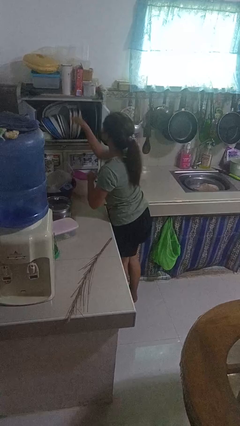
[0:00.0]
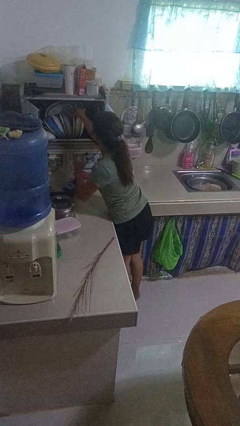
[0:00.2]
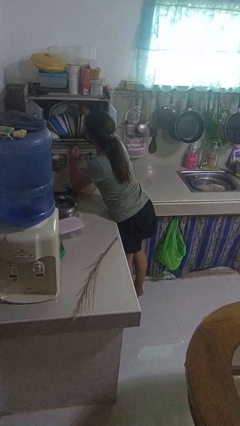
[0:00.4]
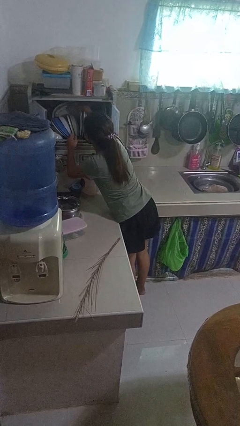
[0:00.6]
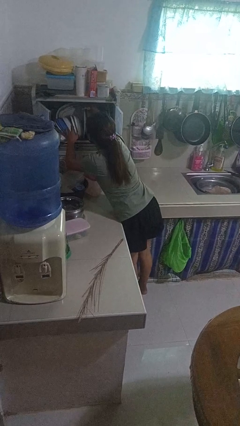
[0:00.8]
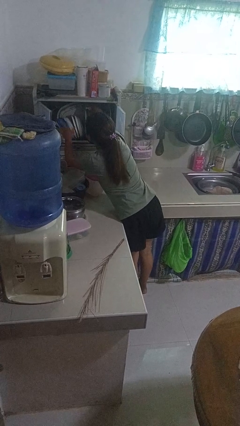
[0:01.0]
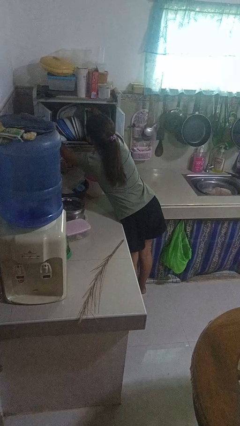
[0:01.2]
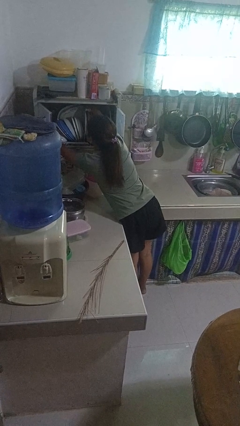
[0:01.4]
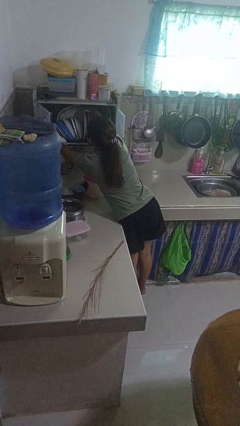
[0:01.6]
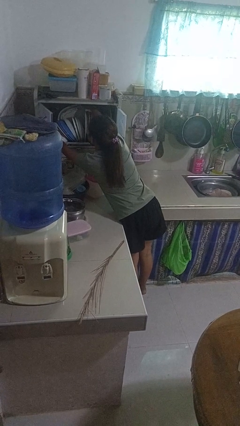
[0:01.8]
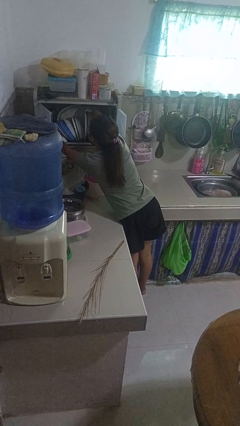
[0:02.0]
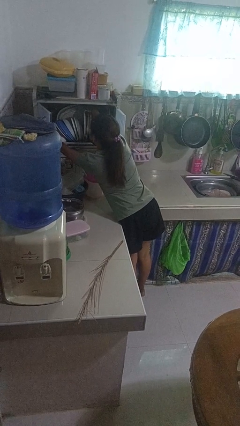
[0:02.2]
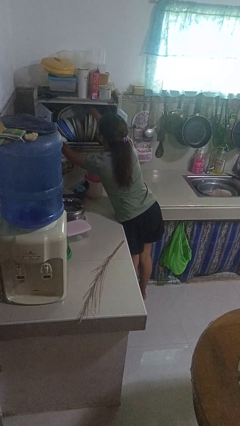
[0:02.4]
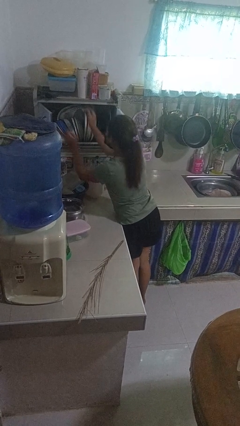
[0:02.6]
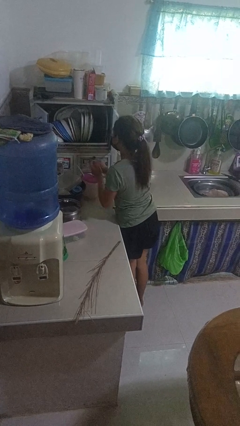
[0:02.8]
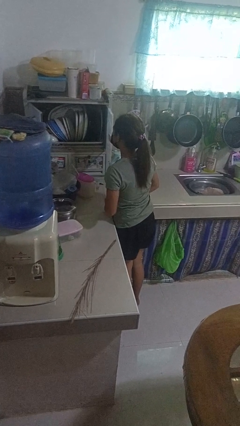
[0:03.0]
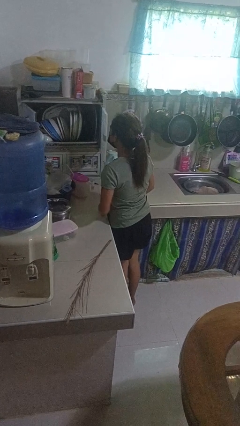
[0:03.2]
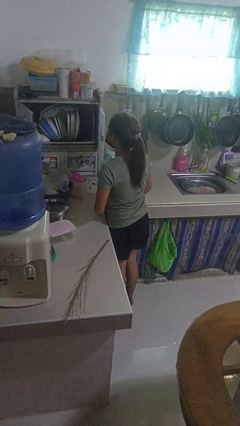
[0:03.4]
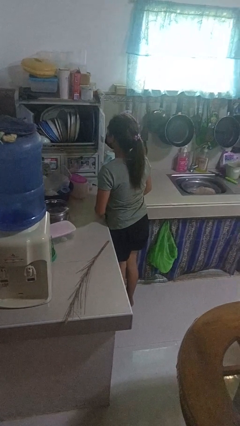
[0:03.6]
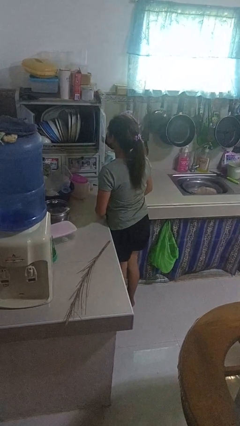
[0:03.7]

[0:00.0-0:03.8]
person searches in kitchen drawer

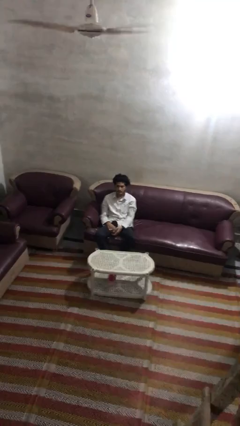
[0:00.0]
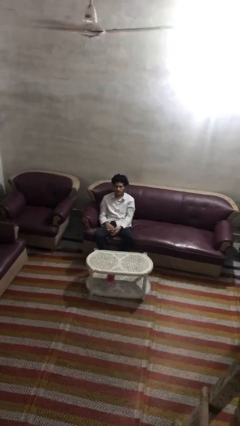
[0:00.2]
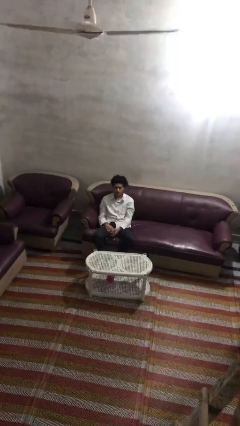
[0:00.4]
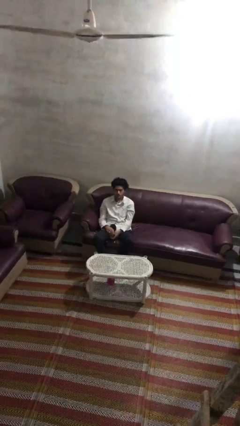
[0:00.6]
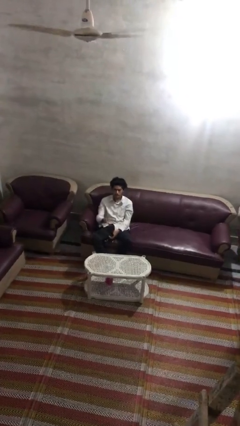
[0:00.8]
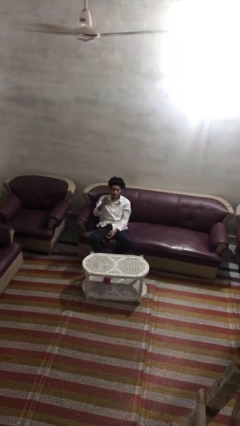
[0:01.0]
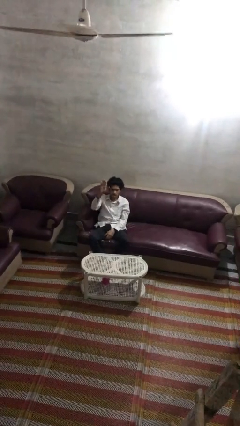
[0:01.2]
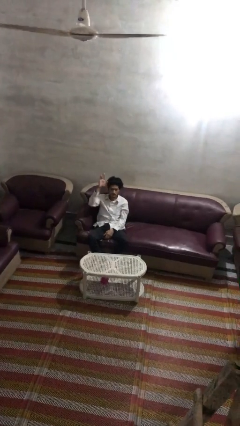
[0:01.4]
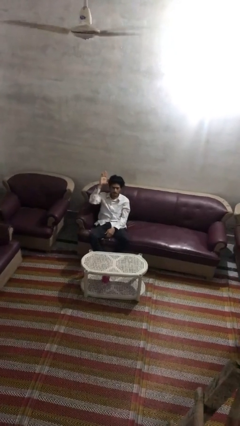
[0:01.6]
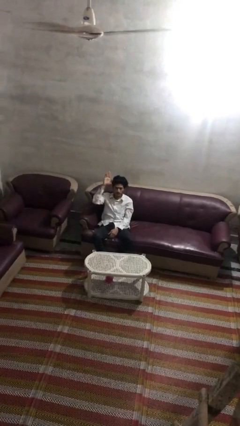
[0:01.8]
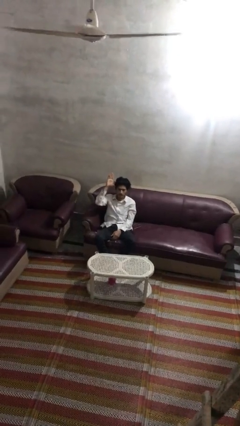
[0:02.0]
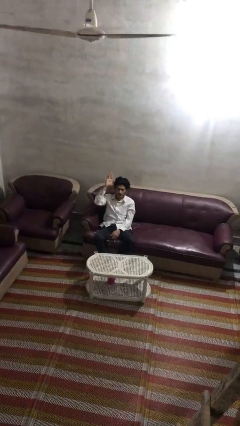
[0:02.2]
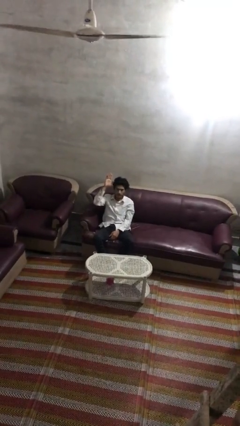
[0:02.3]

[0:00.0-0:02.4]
person gestures raise hand

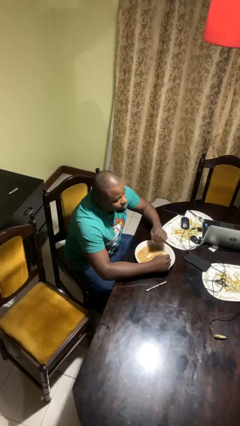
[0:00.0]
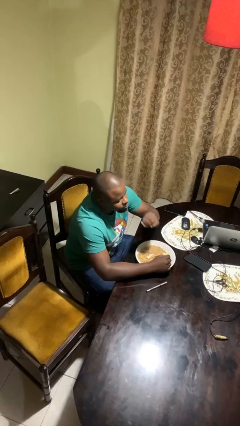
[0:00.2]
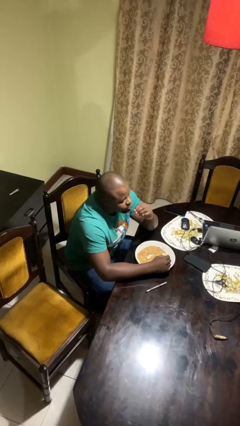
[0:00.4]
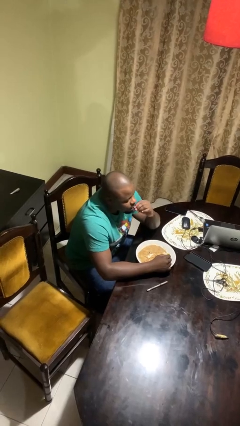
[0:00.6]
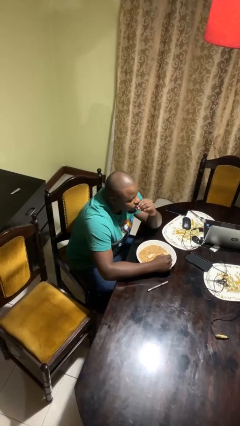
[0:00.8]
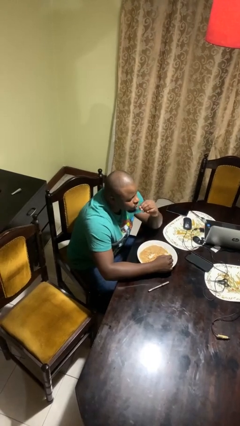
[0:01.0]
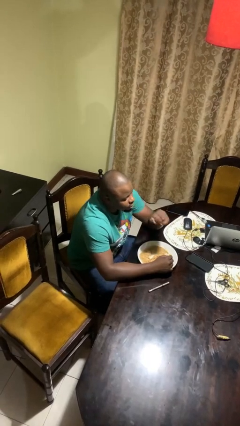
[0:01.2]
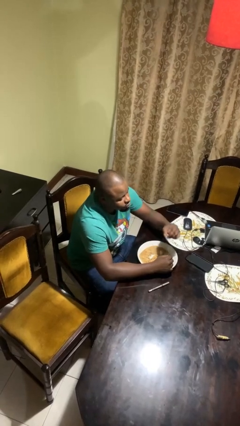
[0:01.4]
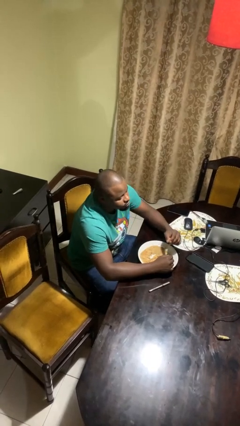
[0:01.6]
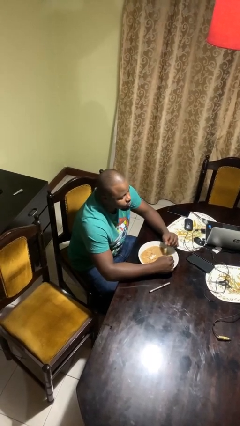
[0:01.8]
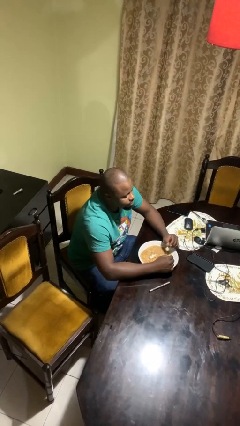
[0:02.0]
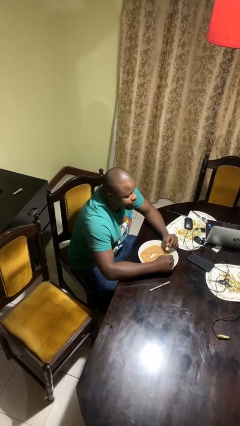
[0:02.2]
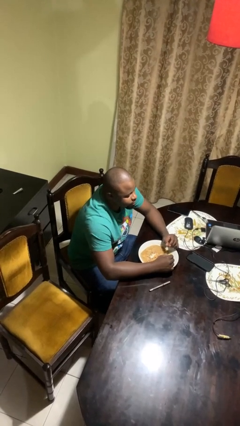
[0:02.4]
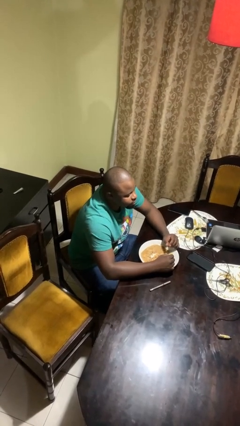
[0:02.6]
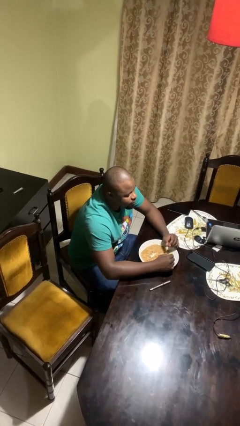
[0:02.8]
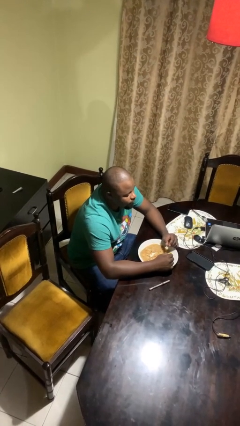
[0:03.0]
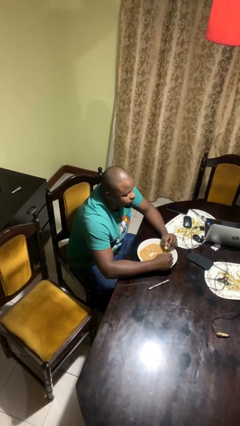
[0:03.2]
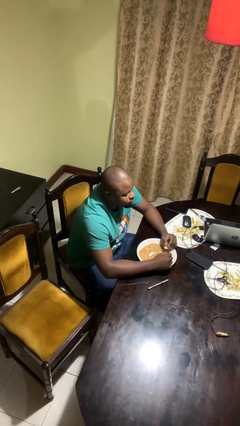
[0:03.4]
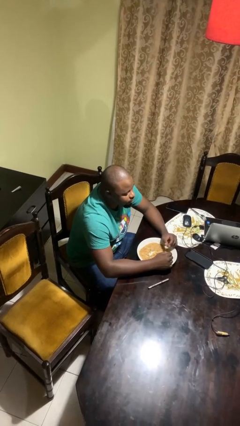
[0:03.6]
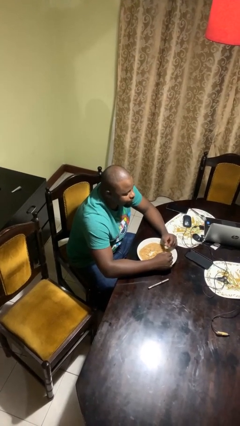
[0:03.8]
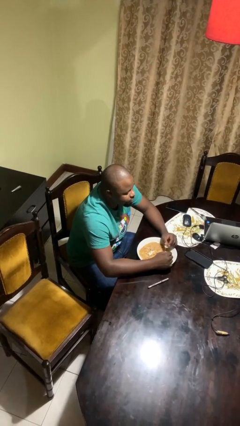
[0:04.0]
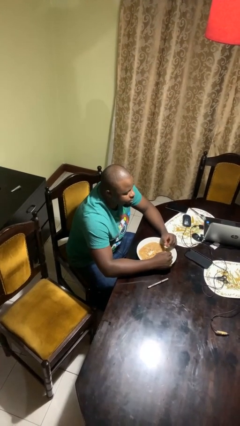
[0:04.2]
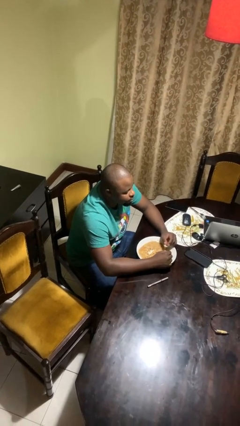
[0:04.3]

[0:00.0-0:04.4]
person eats with hands

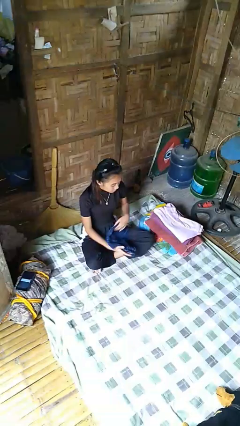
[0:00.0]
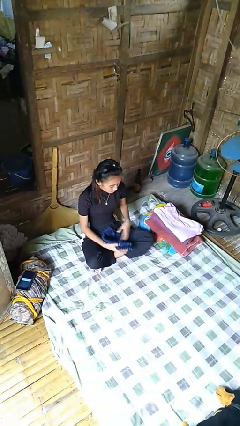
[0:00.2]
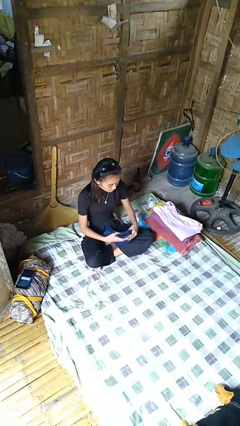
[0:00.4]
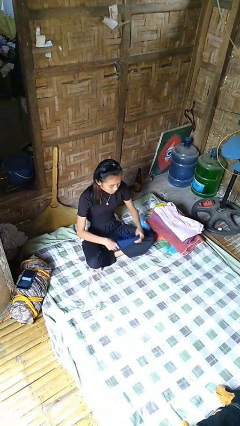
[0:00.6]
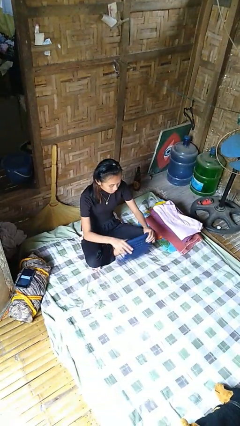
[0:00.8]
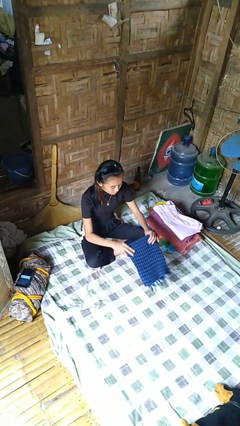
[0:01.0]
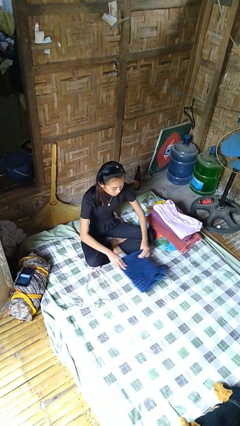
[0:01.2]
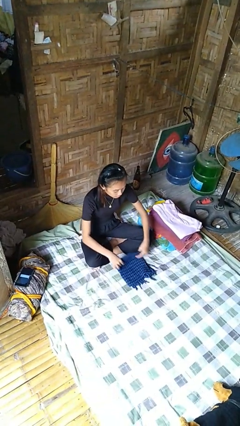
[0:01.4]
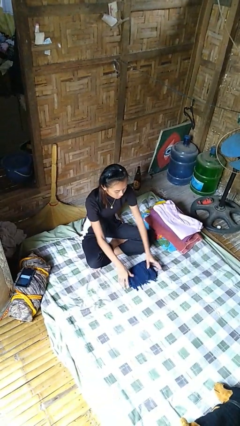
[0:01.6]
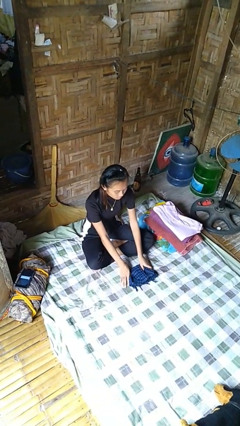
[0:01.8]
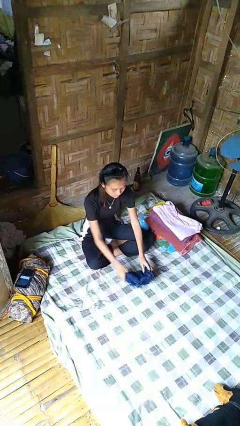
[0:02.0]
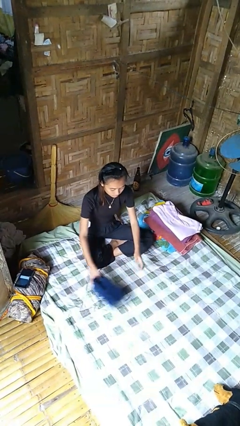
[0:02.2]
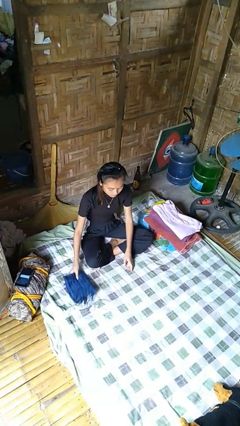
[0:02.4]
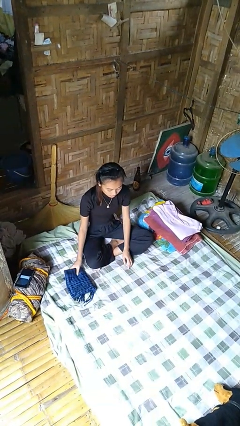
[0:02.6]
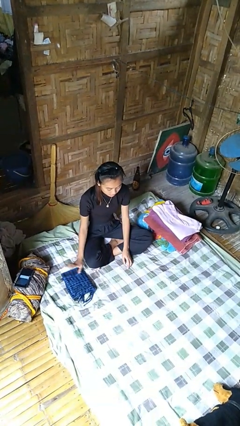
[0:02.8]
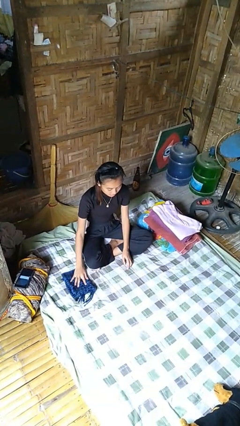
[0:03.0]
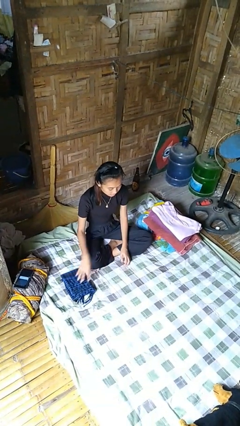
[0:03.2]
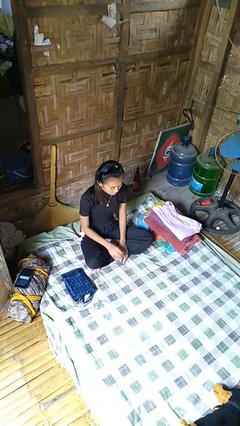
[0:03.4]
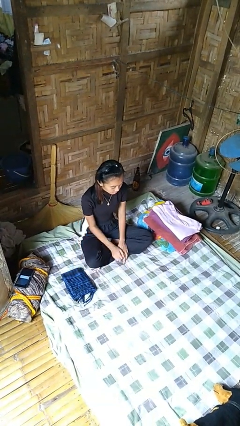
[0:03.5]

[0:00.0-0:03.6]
person folds towel

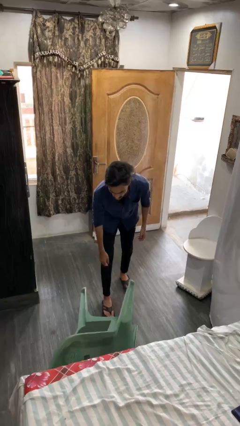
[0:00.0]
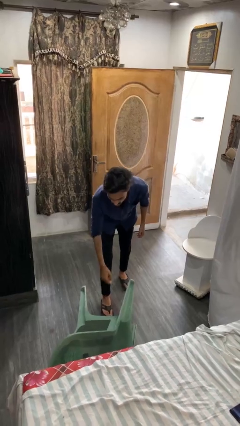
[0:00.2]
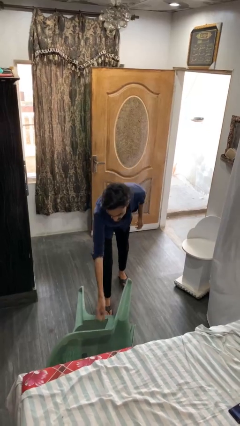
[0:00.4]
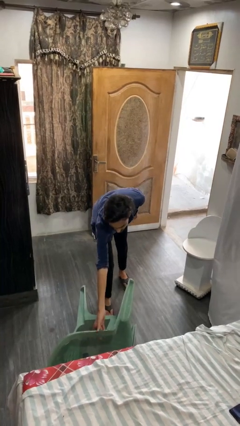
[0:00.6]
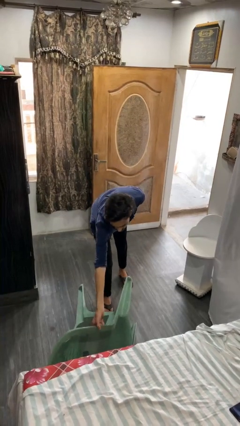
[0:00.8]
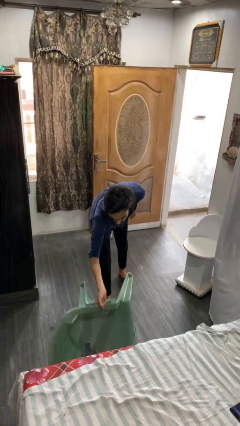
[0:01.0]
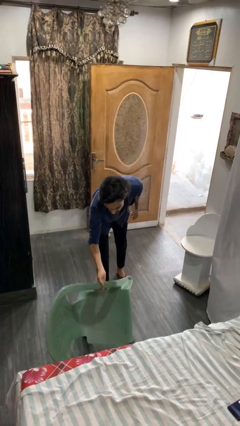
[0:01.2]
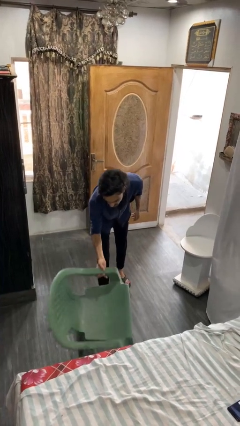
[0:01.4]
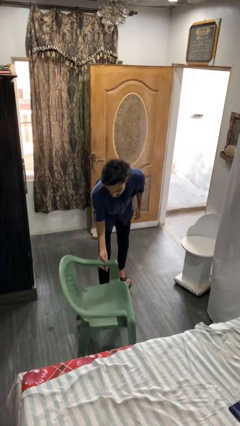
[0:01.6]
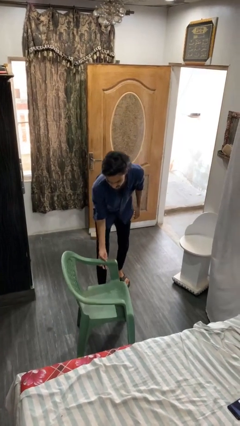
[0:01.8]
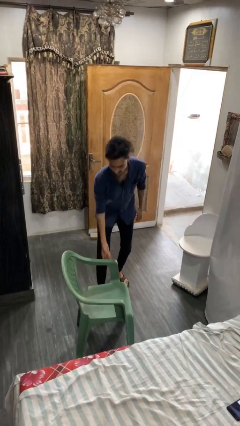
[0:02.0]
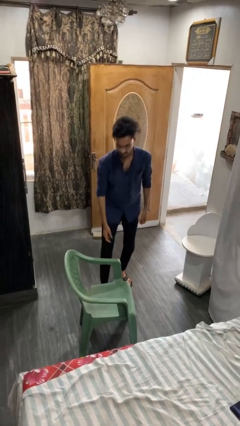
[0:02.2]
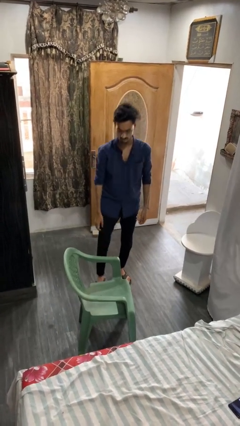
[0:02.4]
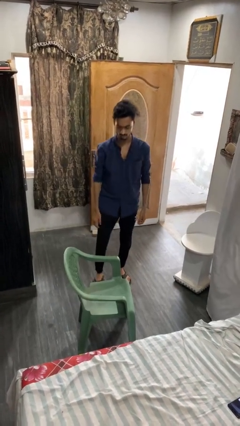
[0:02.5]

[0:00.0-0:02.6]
person sets upright furniture

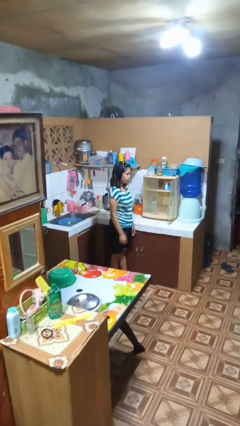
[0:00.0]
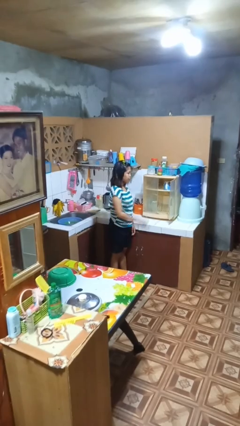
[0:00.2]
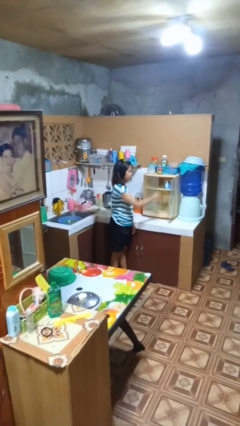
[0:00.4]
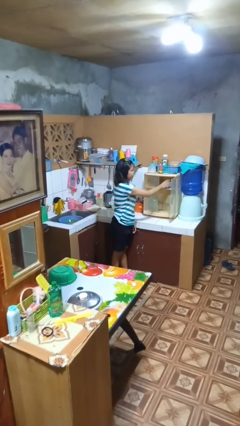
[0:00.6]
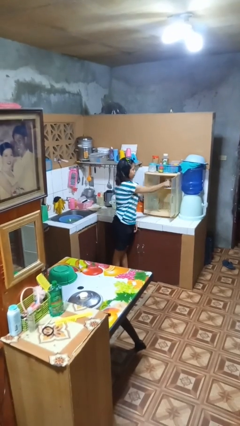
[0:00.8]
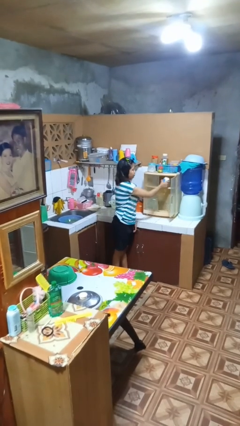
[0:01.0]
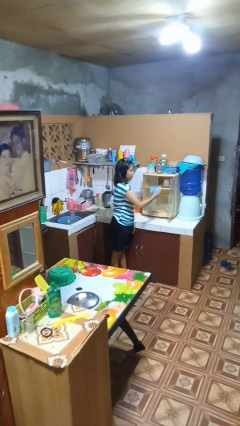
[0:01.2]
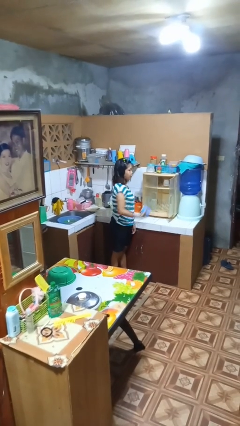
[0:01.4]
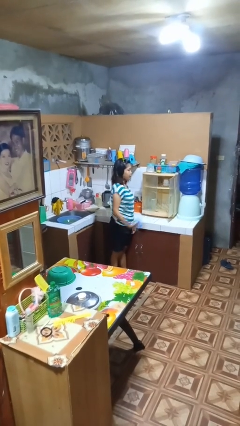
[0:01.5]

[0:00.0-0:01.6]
person takes object from cabinet
